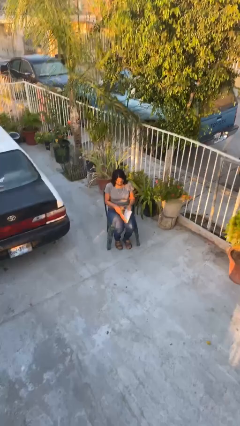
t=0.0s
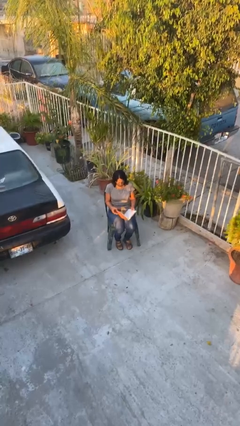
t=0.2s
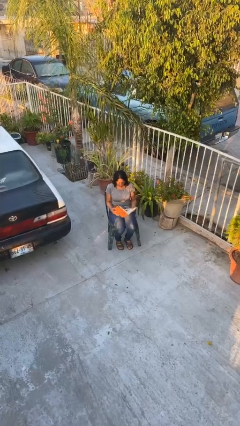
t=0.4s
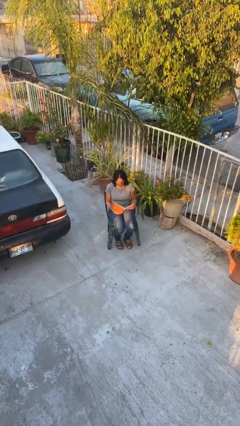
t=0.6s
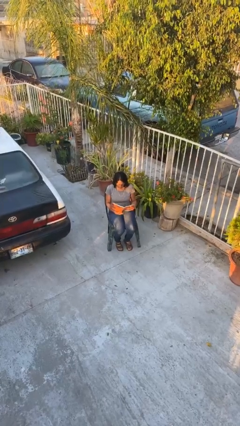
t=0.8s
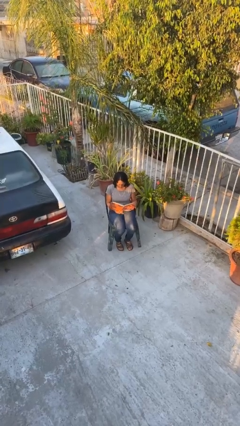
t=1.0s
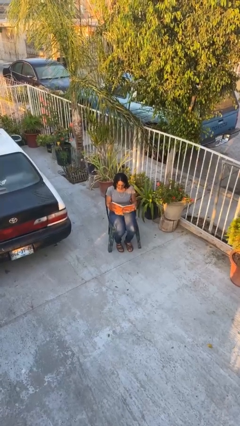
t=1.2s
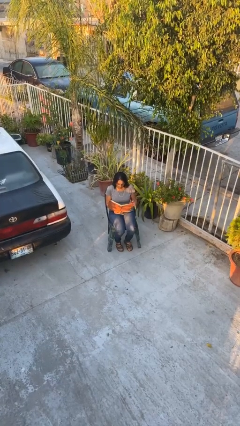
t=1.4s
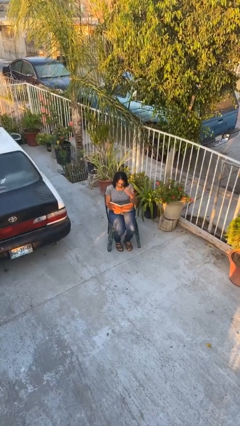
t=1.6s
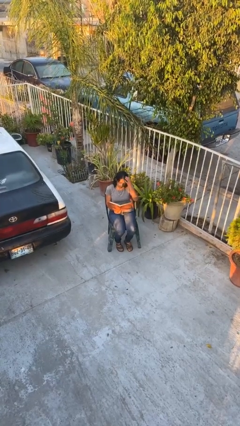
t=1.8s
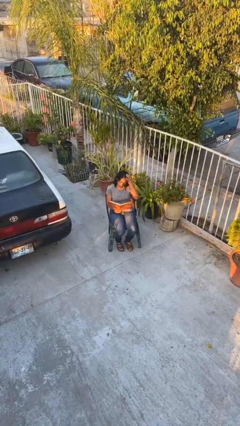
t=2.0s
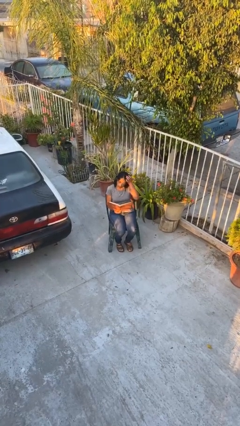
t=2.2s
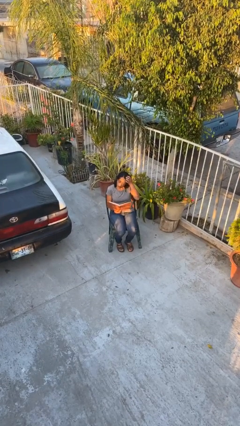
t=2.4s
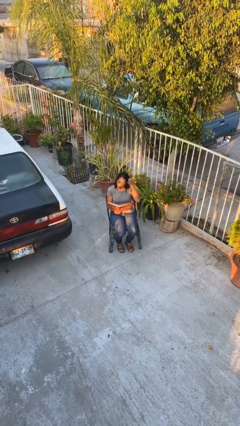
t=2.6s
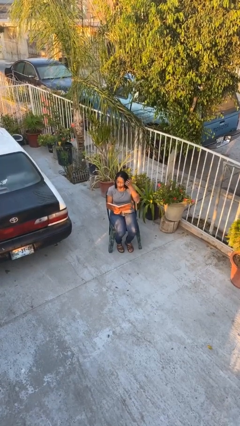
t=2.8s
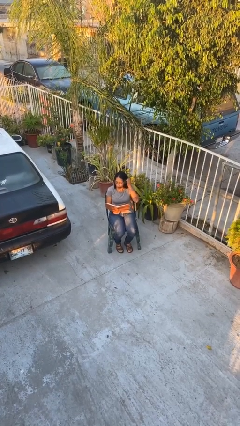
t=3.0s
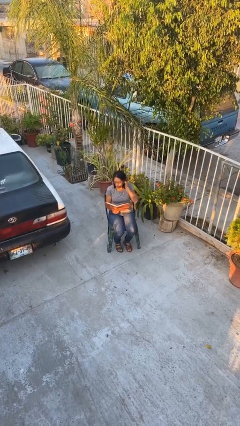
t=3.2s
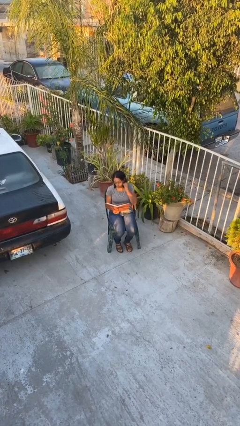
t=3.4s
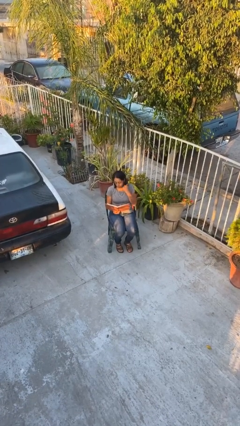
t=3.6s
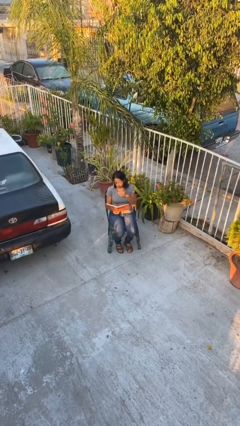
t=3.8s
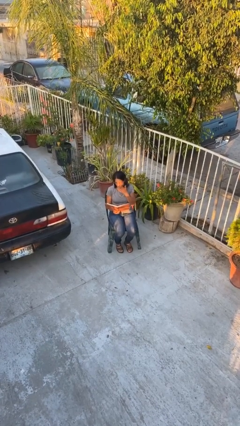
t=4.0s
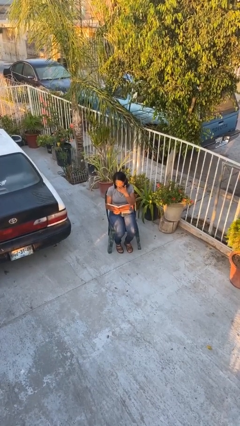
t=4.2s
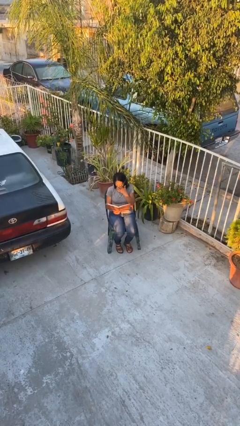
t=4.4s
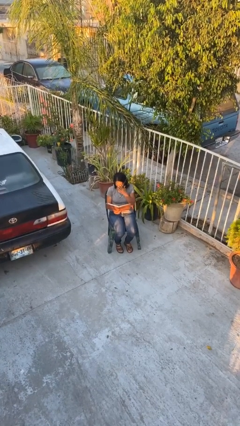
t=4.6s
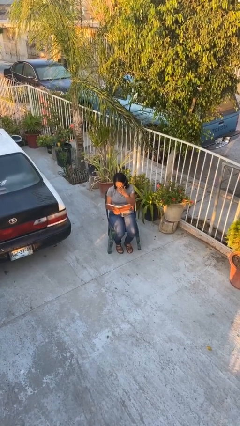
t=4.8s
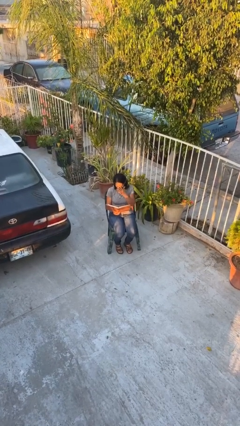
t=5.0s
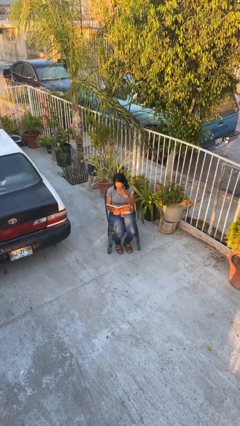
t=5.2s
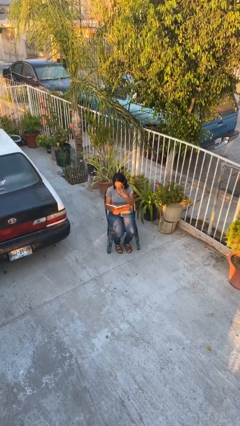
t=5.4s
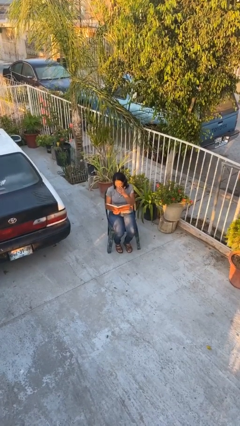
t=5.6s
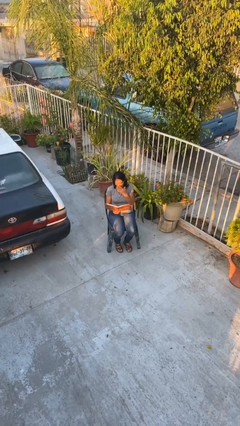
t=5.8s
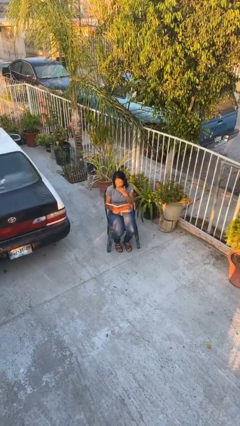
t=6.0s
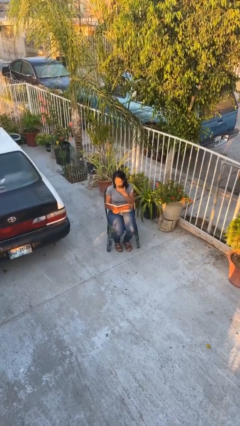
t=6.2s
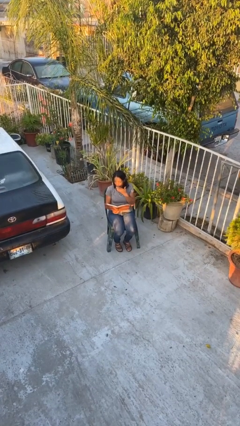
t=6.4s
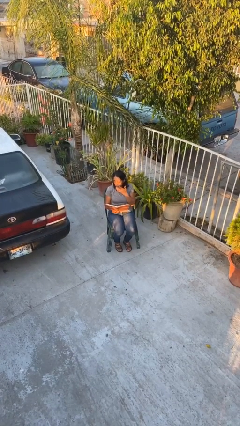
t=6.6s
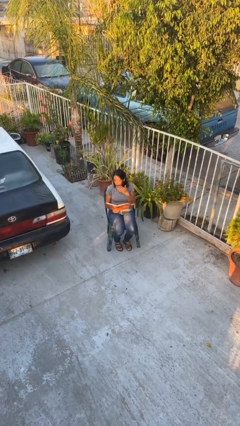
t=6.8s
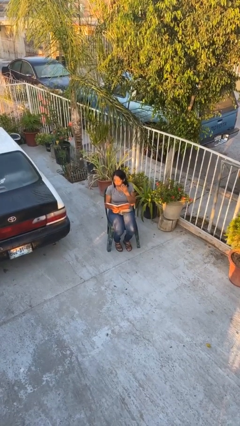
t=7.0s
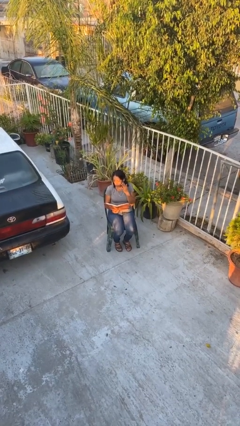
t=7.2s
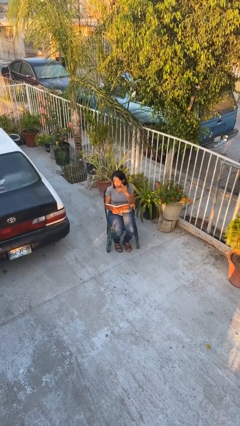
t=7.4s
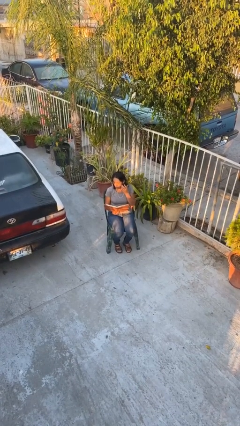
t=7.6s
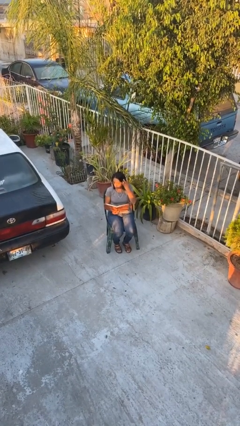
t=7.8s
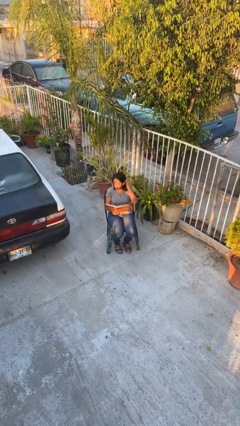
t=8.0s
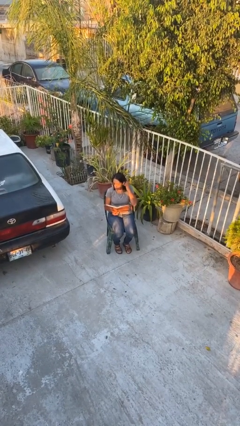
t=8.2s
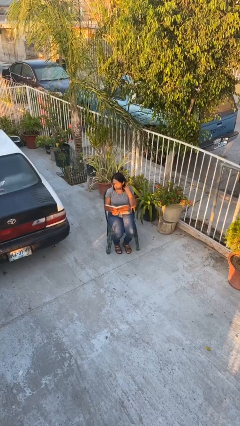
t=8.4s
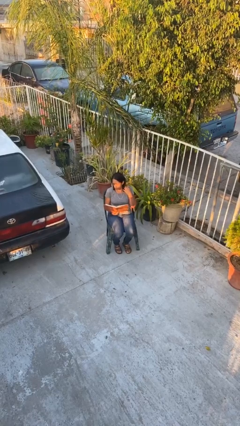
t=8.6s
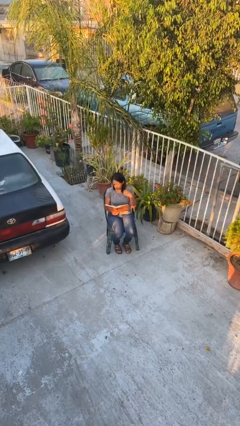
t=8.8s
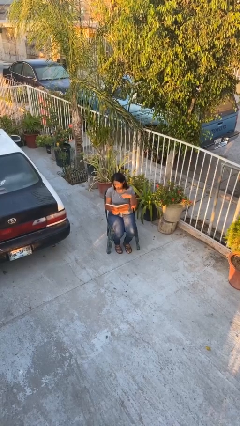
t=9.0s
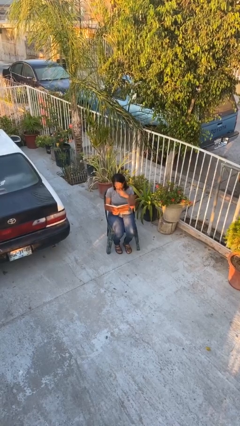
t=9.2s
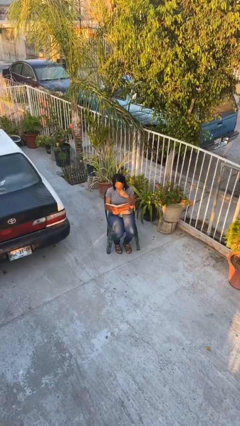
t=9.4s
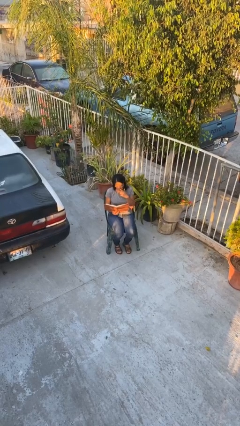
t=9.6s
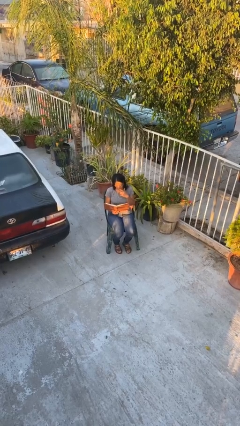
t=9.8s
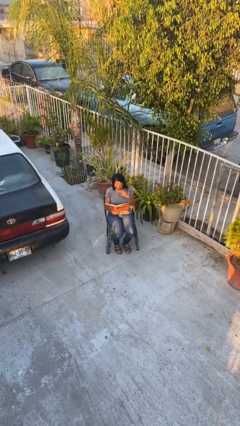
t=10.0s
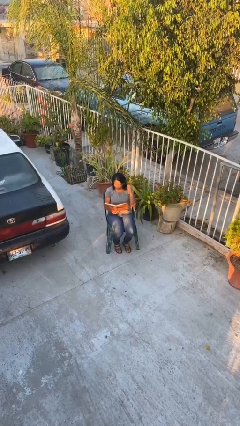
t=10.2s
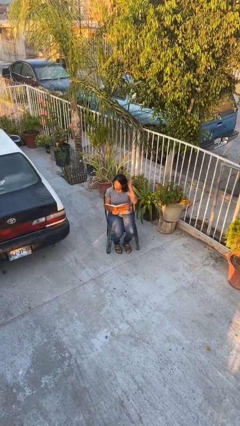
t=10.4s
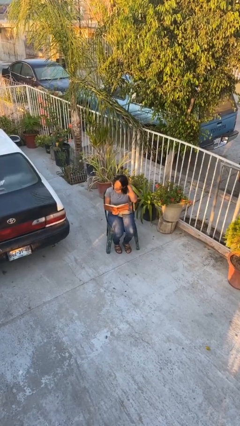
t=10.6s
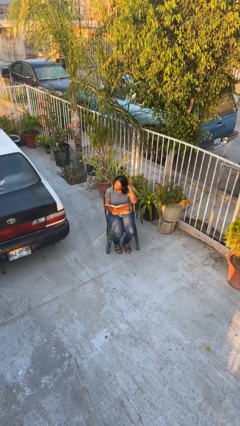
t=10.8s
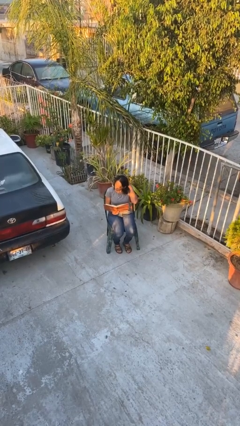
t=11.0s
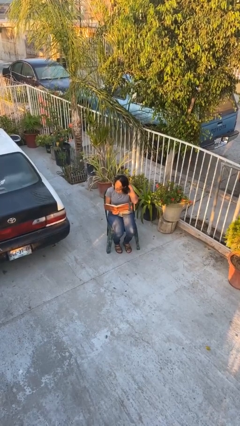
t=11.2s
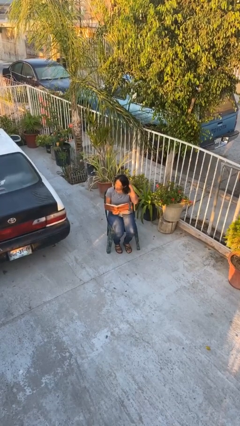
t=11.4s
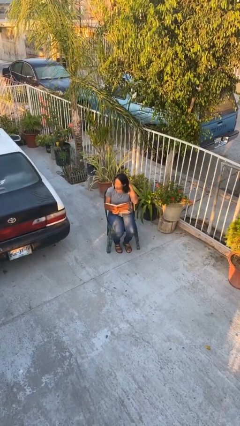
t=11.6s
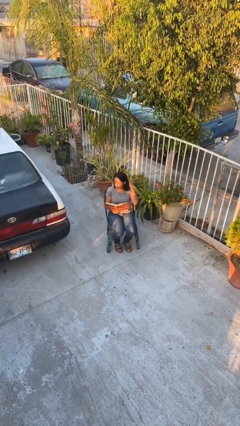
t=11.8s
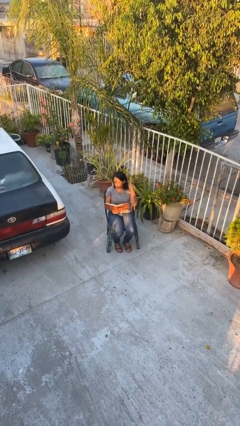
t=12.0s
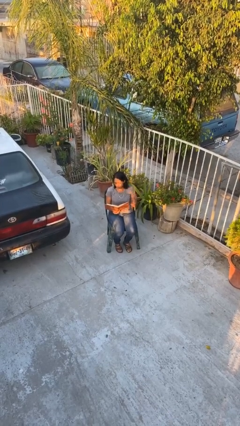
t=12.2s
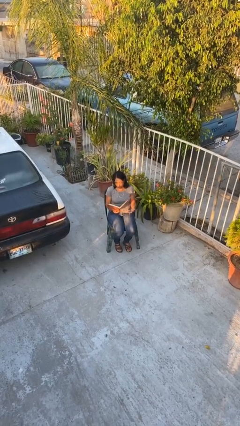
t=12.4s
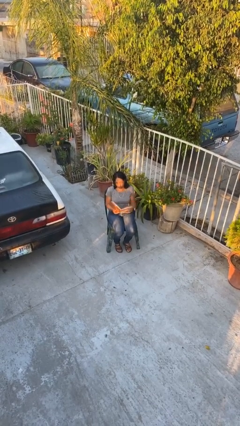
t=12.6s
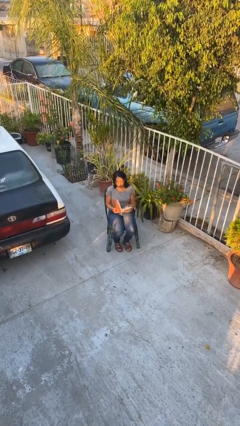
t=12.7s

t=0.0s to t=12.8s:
person reads document

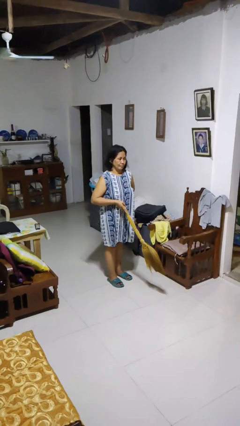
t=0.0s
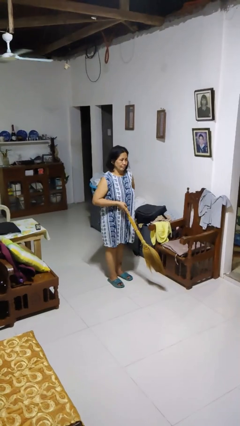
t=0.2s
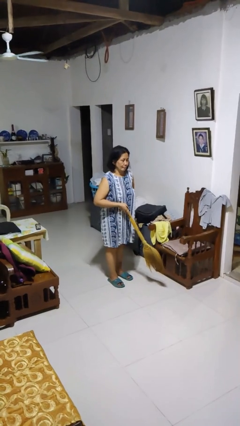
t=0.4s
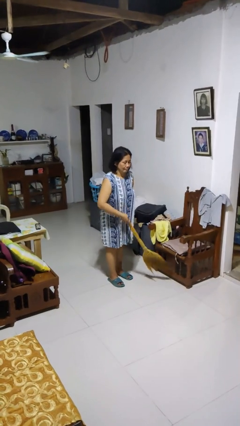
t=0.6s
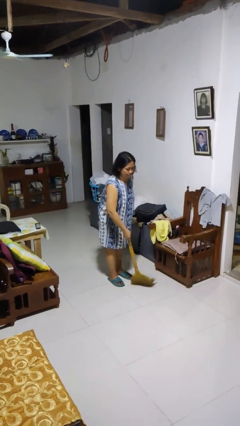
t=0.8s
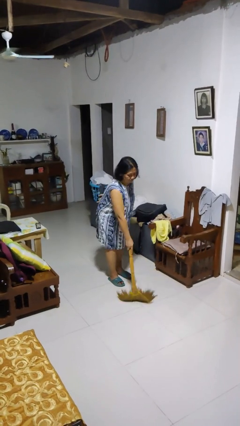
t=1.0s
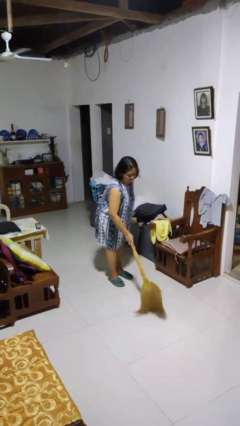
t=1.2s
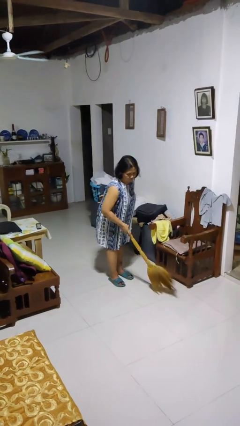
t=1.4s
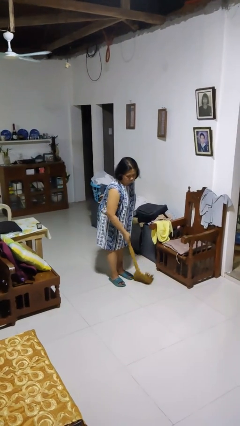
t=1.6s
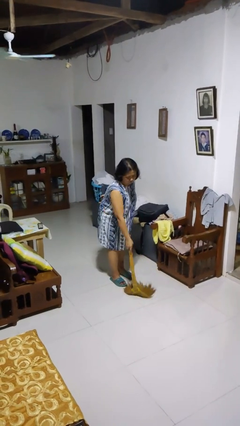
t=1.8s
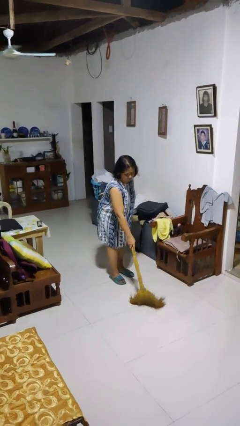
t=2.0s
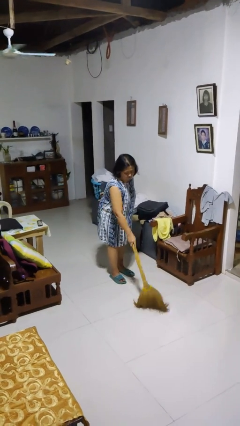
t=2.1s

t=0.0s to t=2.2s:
person sweeps floor

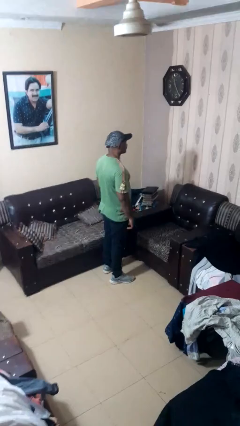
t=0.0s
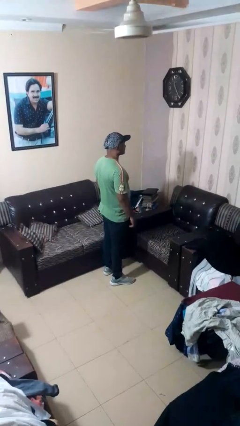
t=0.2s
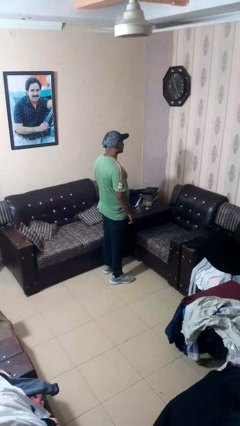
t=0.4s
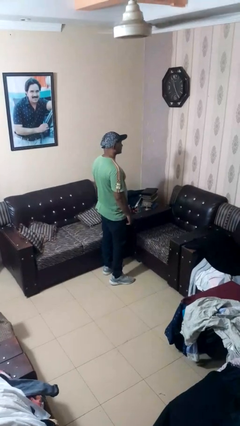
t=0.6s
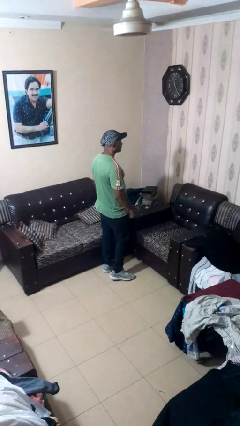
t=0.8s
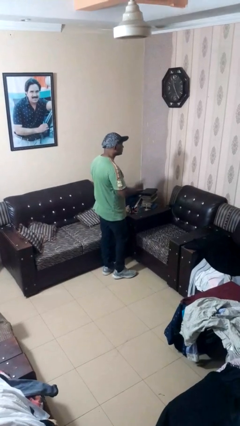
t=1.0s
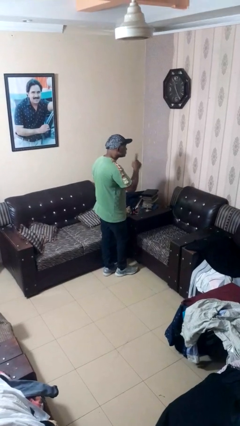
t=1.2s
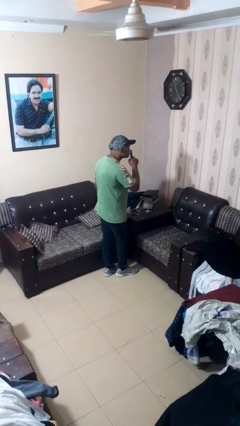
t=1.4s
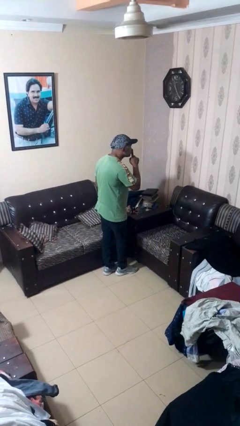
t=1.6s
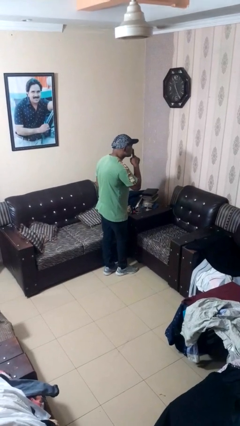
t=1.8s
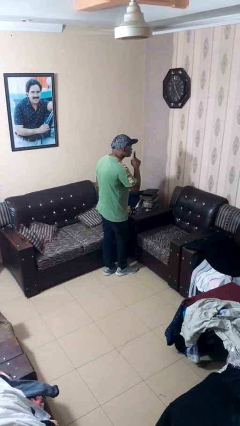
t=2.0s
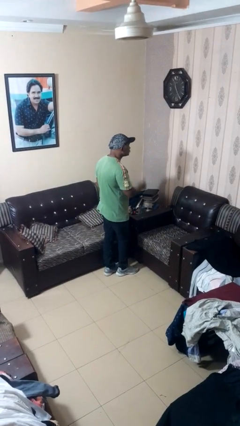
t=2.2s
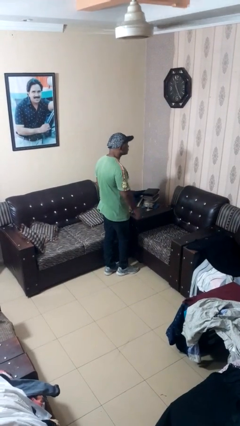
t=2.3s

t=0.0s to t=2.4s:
person gestures be quiet

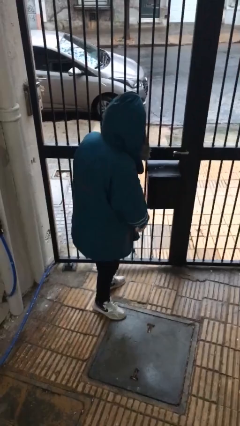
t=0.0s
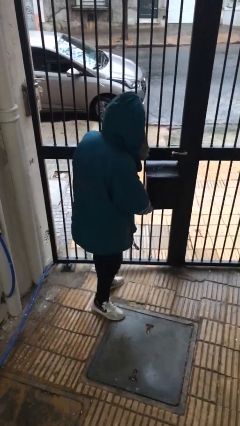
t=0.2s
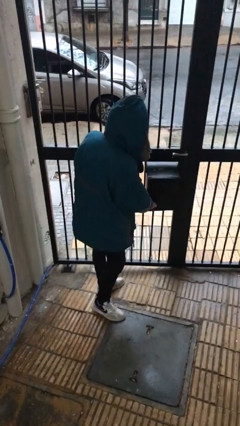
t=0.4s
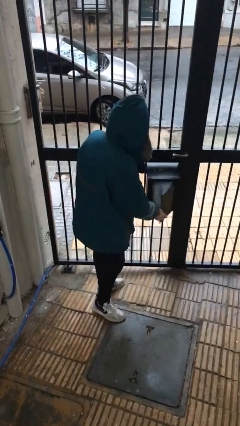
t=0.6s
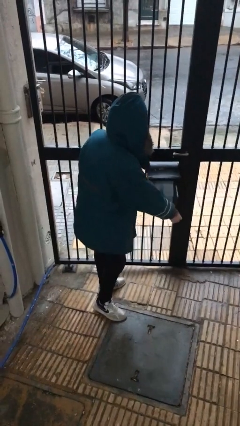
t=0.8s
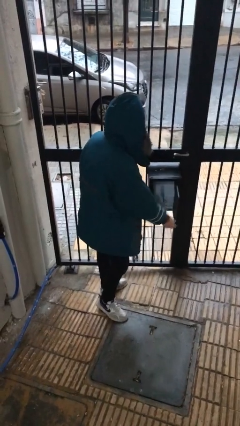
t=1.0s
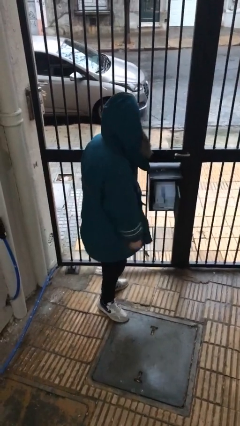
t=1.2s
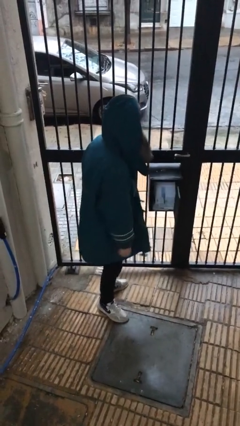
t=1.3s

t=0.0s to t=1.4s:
person opens mailbox
